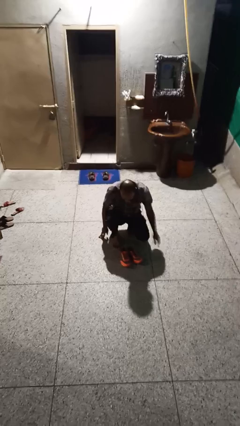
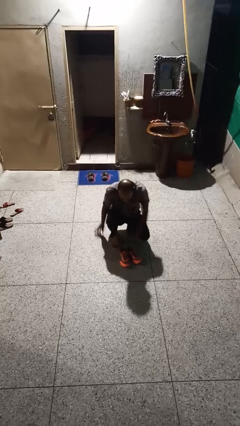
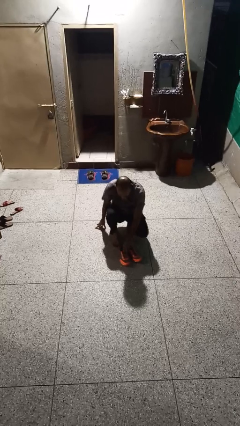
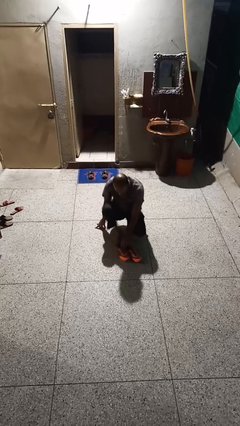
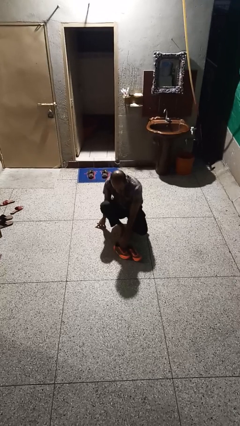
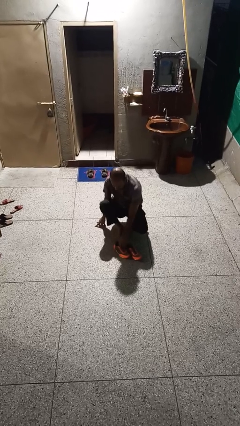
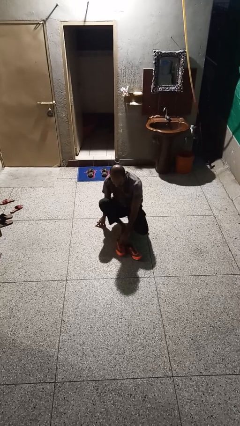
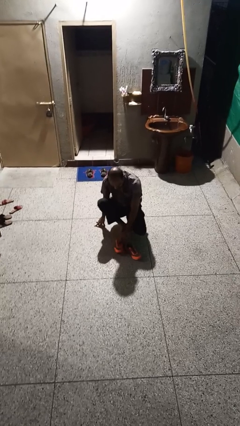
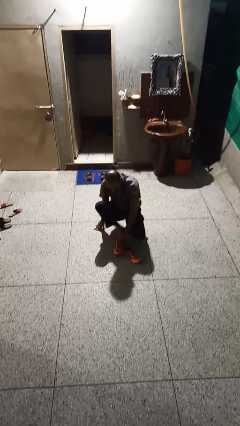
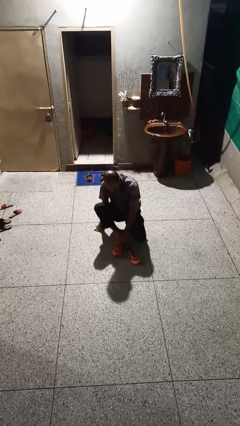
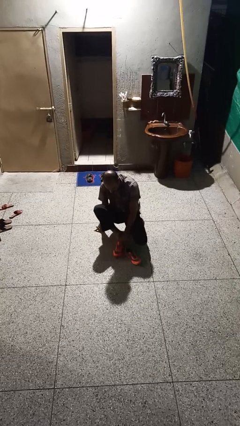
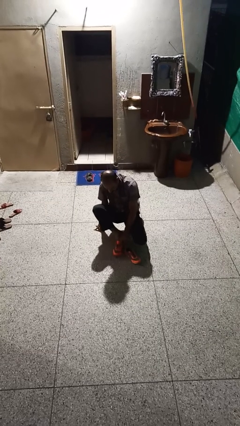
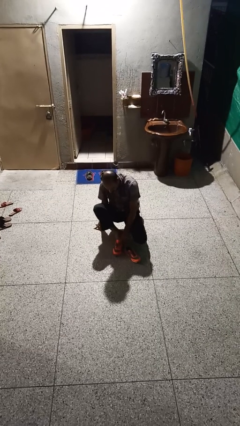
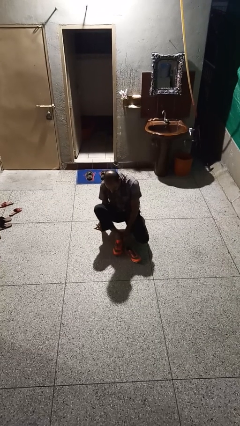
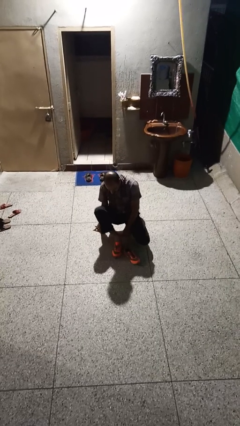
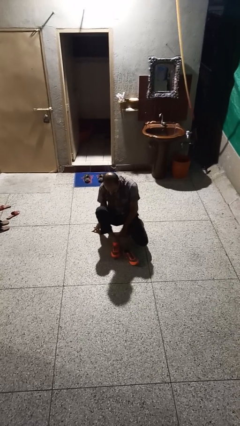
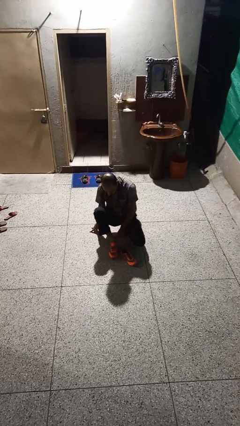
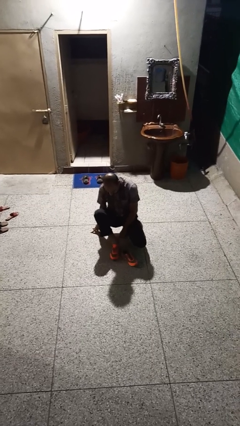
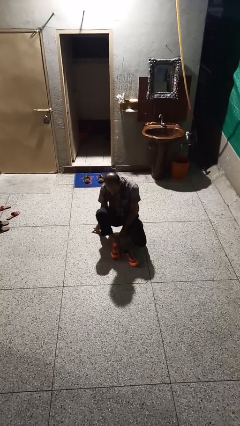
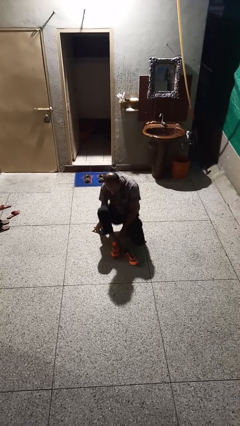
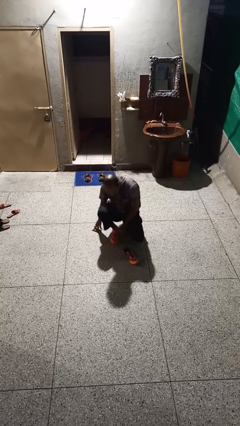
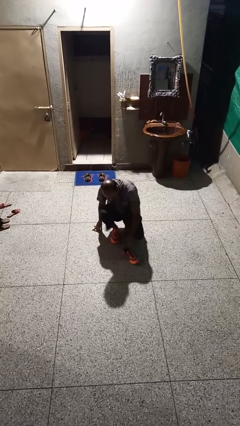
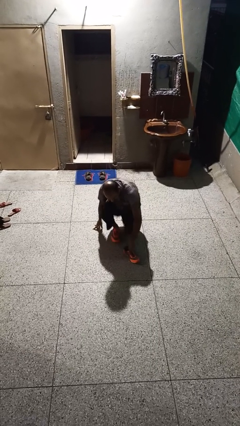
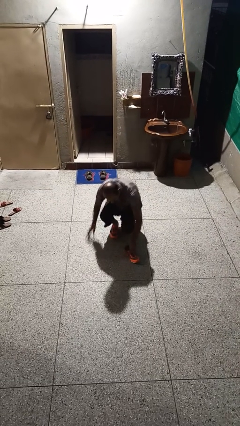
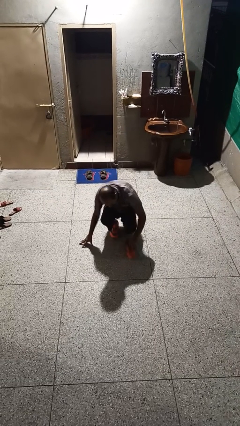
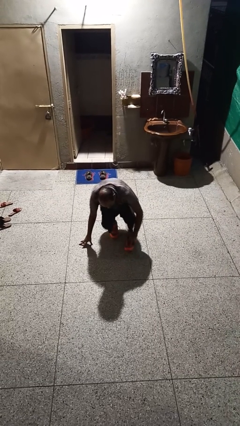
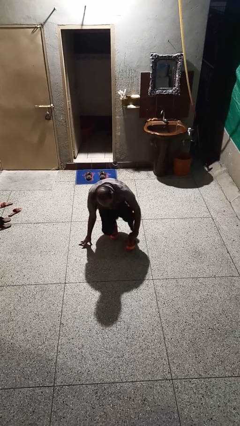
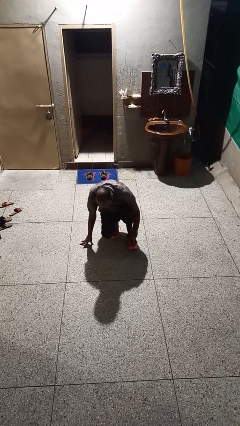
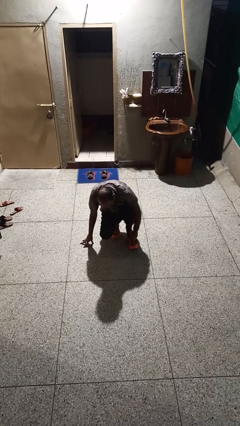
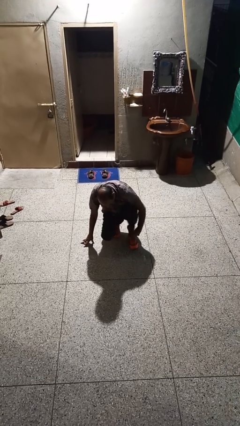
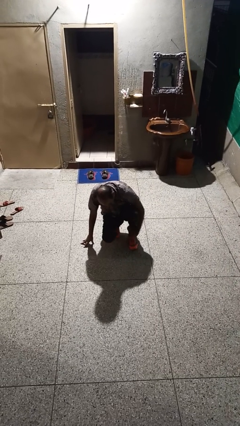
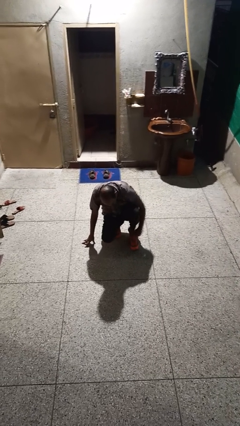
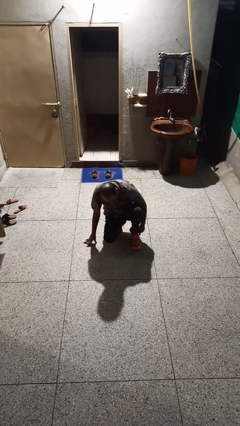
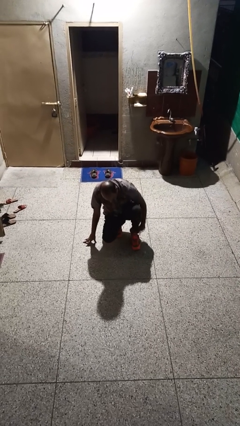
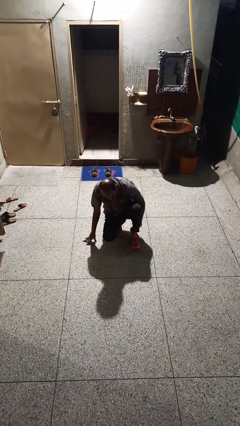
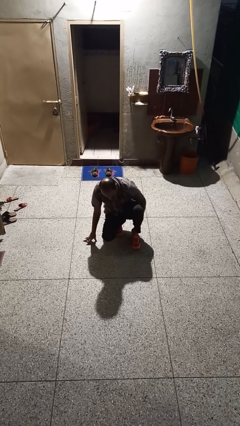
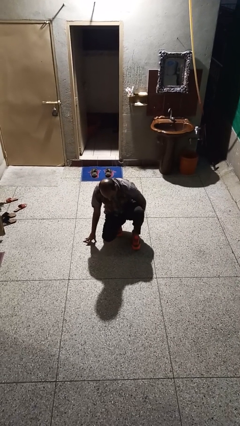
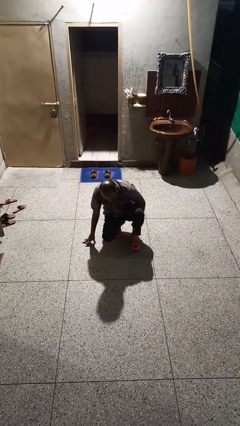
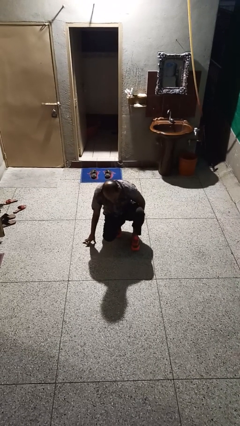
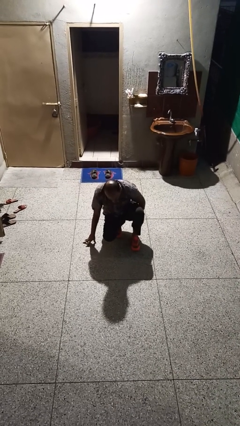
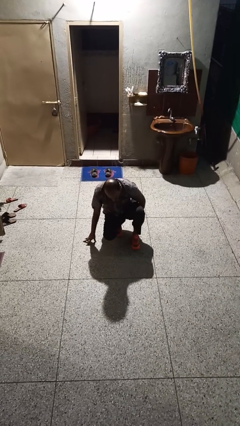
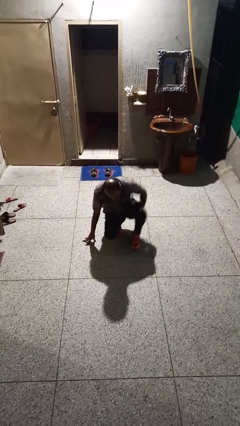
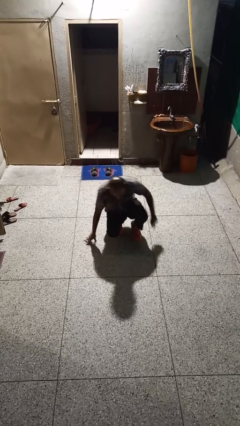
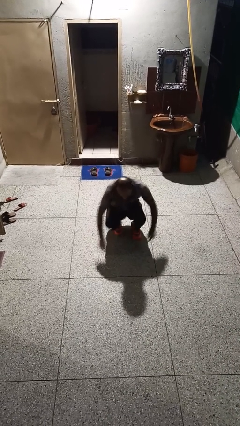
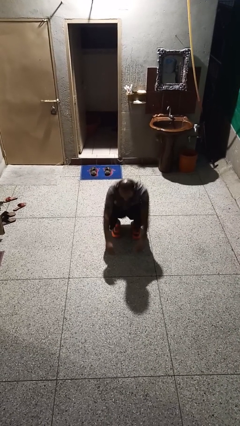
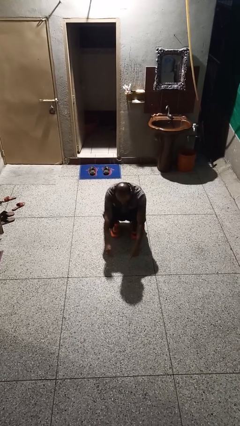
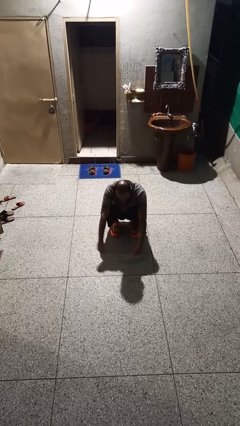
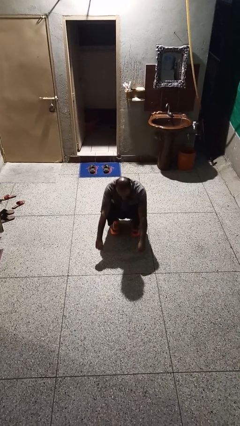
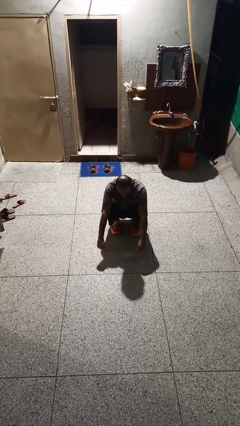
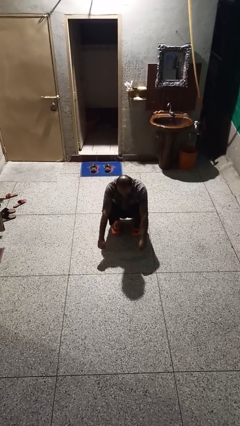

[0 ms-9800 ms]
person puts on shoes

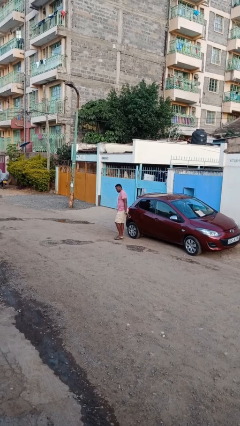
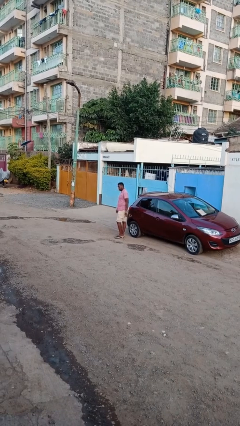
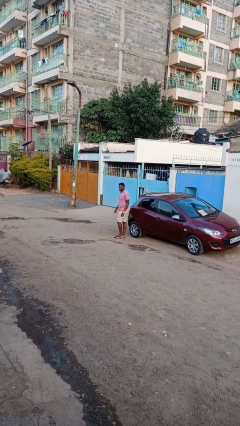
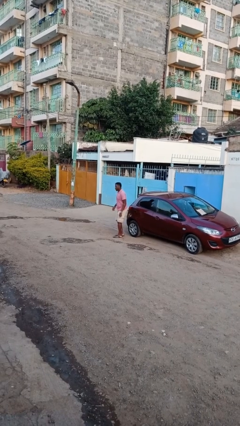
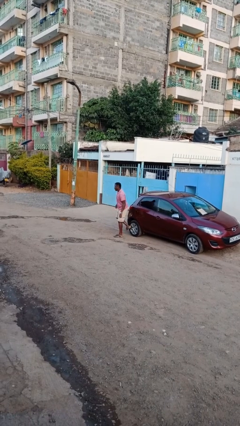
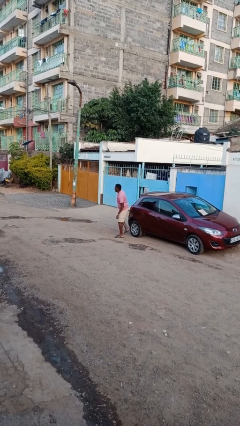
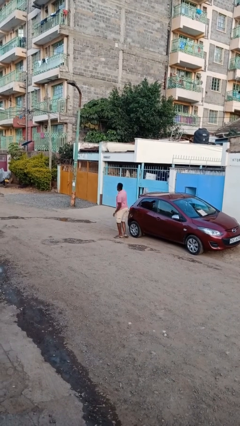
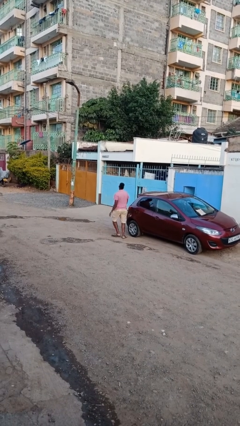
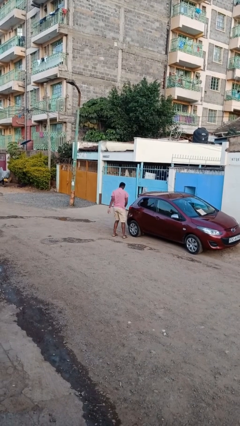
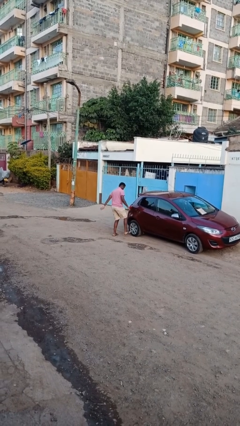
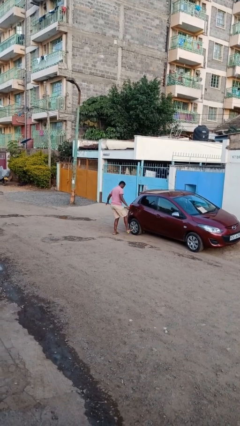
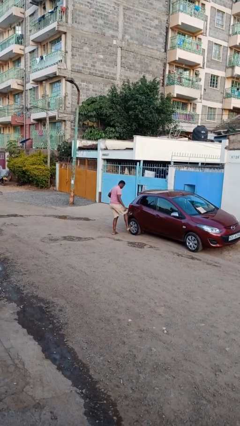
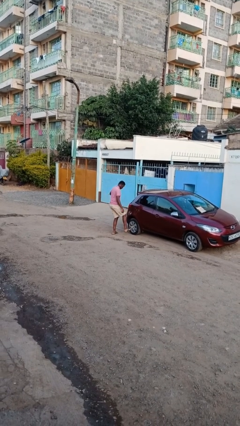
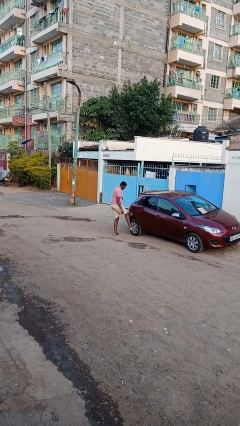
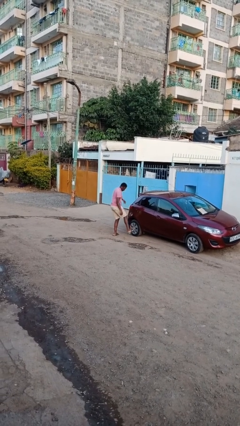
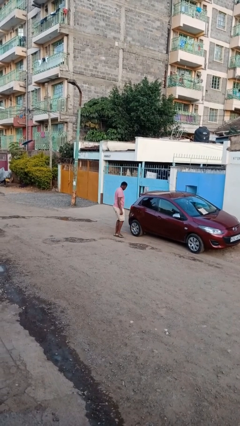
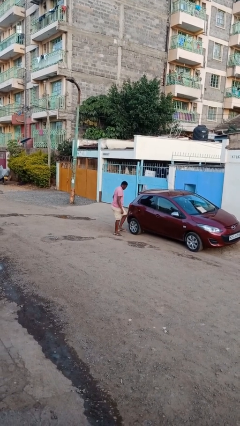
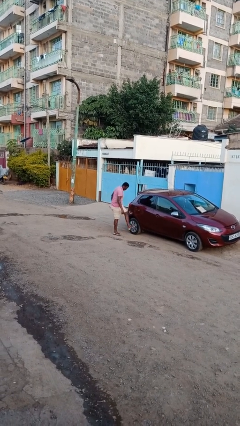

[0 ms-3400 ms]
person kicks car tires

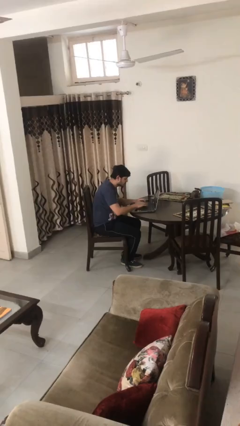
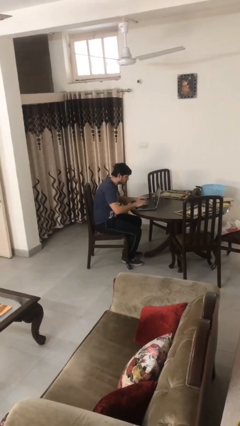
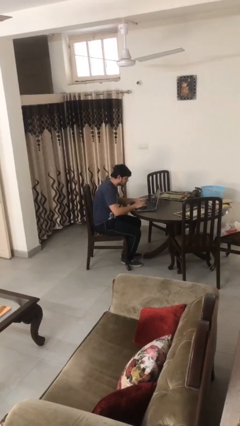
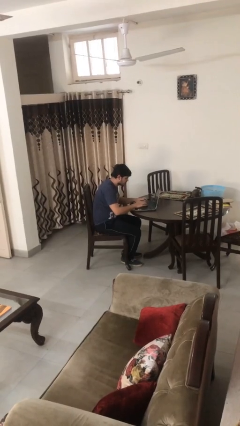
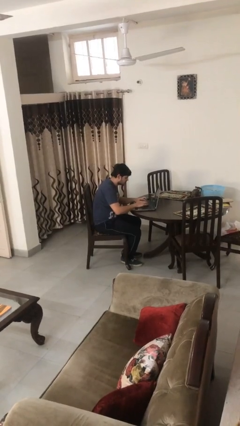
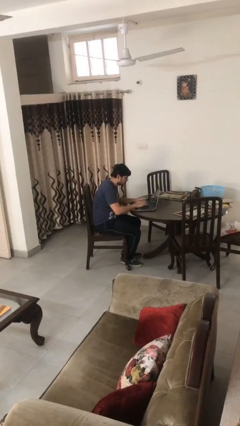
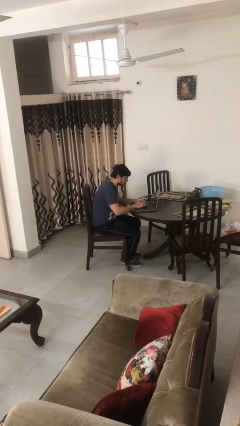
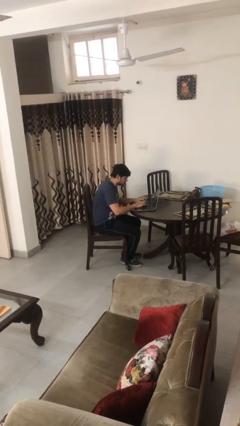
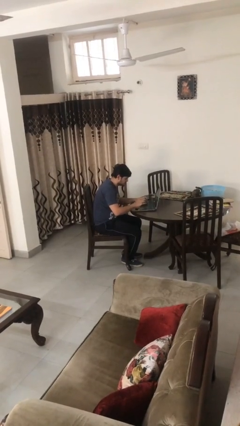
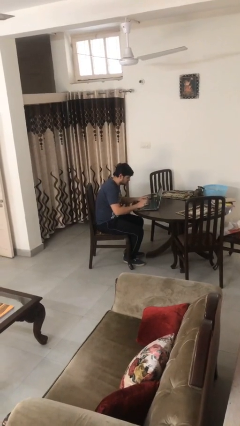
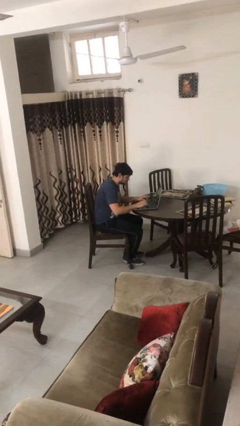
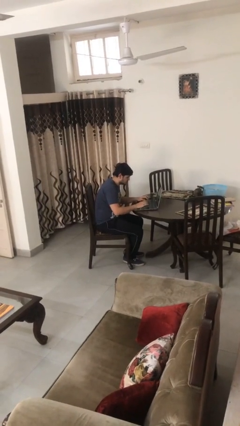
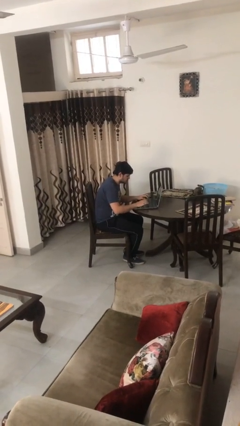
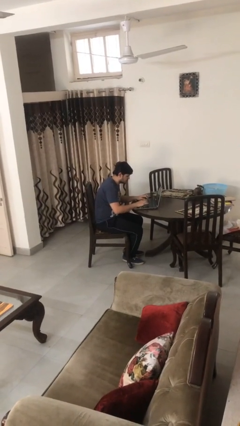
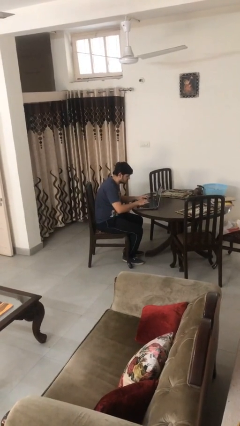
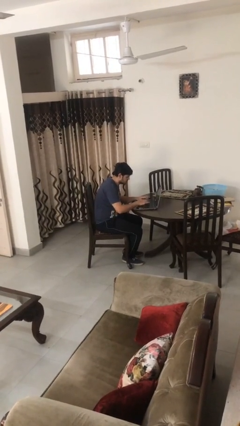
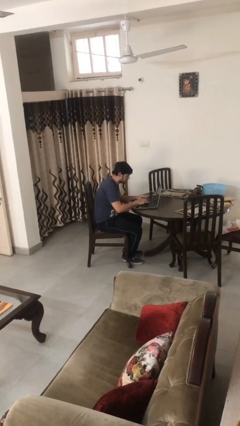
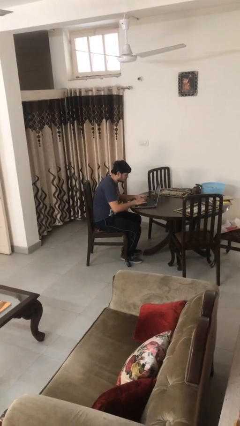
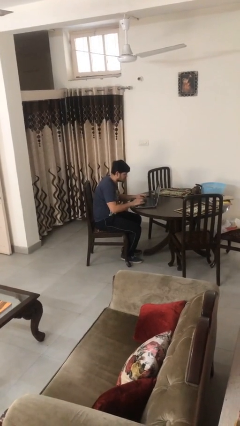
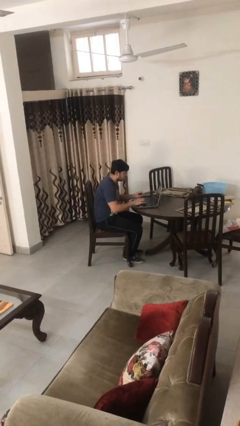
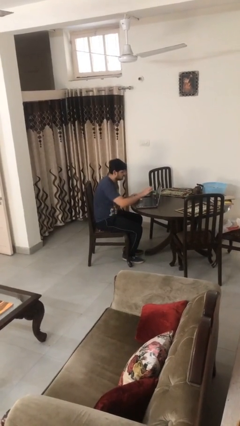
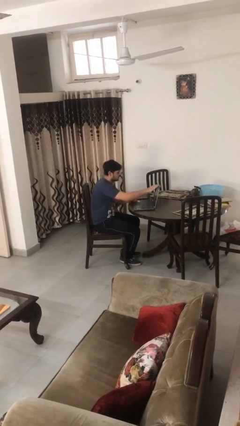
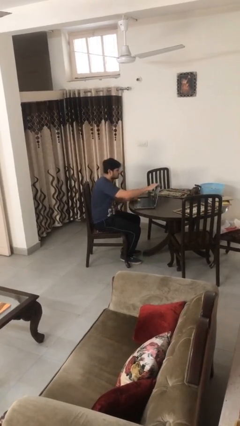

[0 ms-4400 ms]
person interacts with laptop

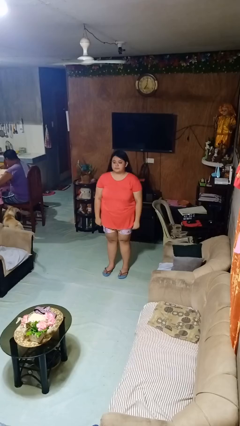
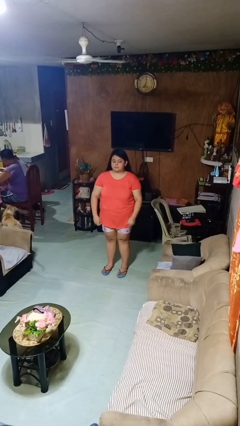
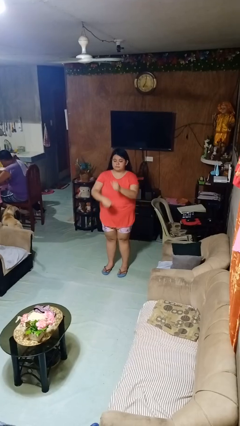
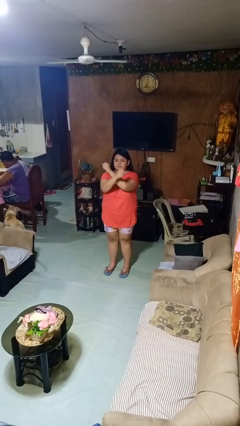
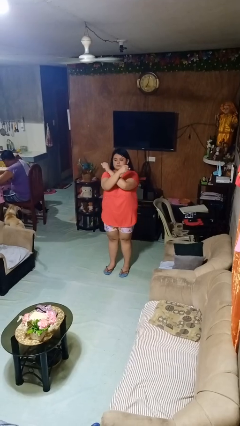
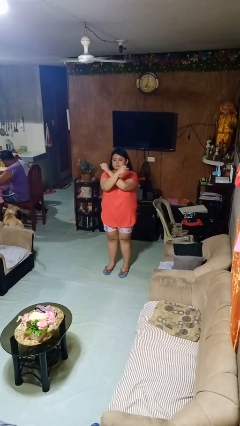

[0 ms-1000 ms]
person gestures arms x
